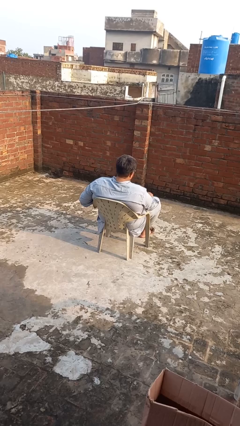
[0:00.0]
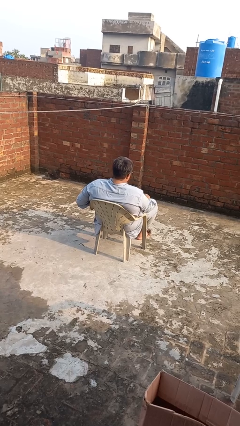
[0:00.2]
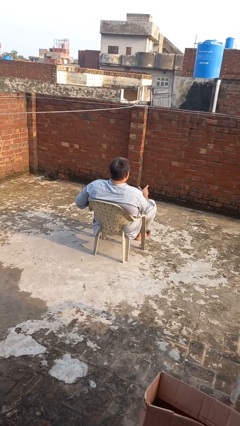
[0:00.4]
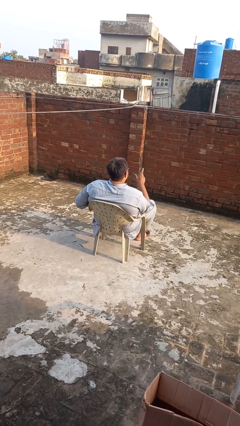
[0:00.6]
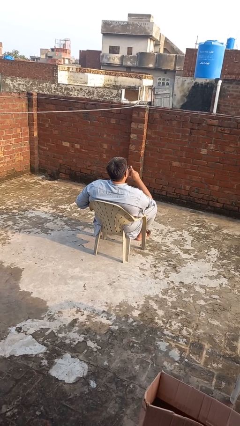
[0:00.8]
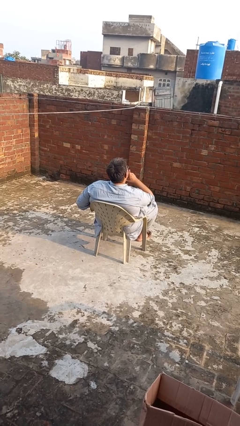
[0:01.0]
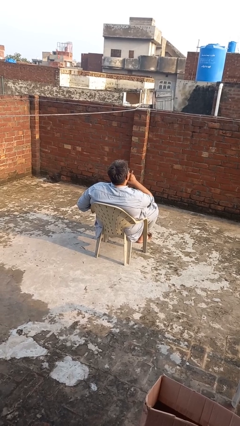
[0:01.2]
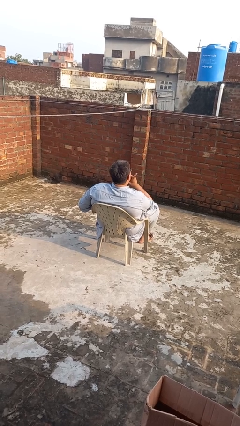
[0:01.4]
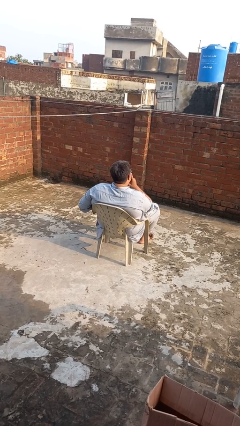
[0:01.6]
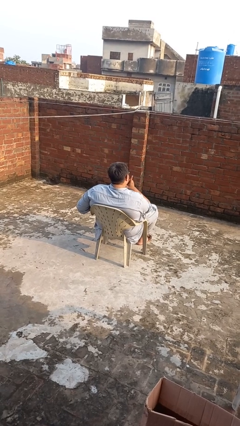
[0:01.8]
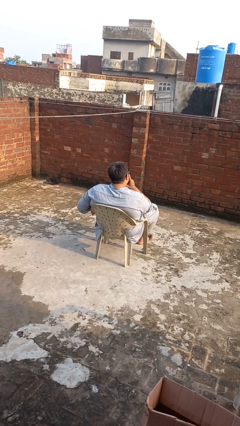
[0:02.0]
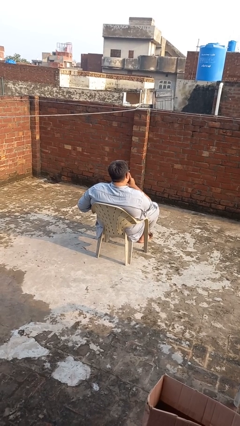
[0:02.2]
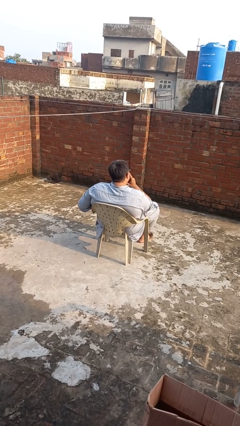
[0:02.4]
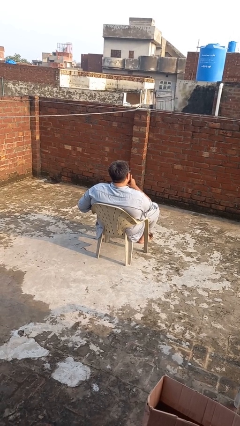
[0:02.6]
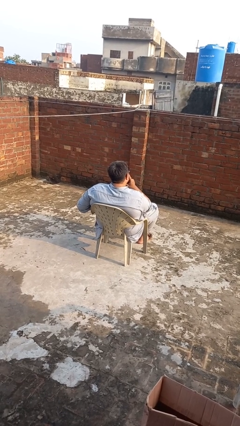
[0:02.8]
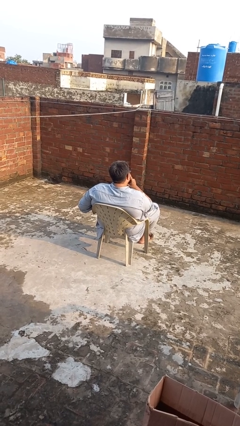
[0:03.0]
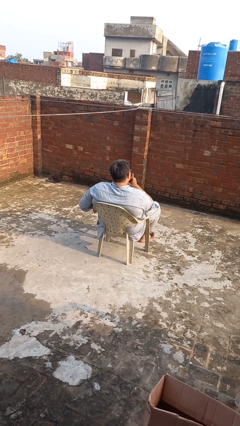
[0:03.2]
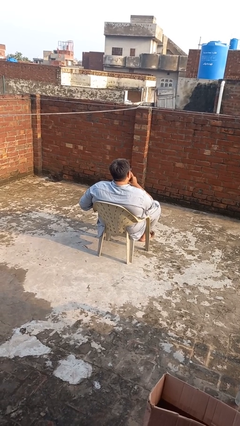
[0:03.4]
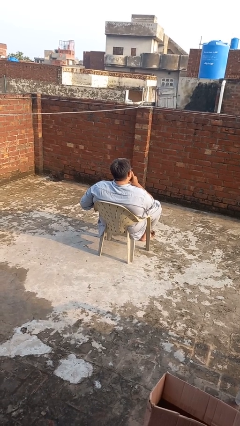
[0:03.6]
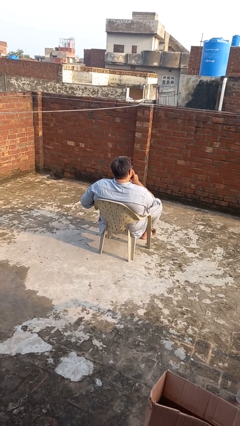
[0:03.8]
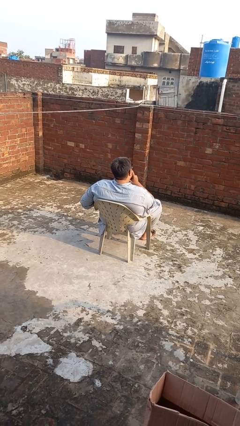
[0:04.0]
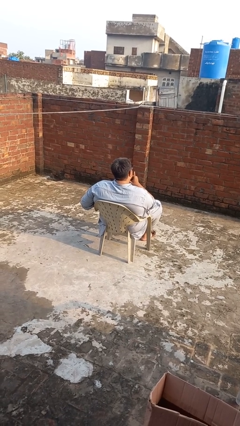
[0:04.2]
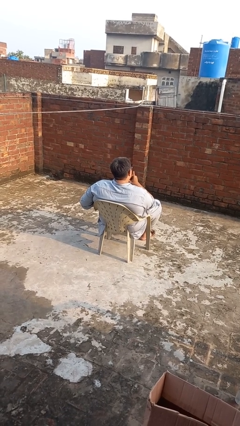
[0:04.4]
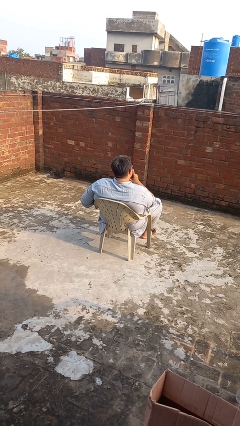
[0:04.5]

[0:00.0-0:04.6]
person strokes chin

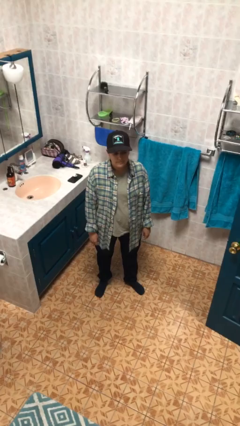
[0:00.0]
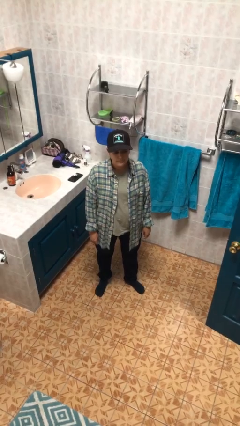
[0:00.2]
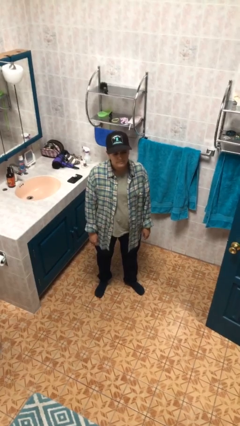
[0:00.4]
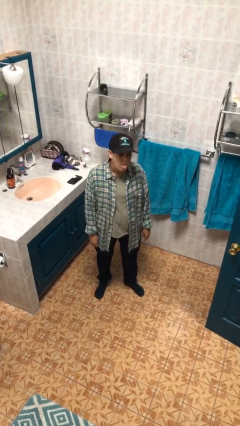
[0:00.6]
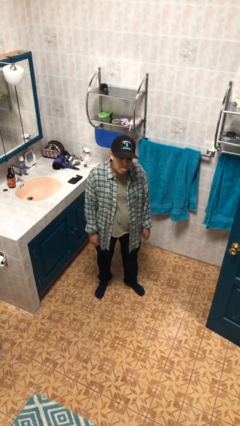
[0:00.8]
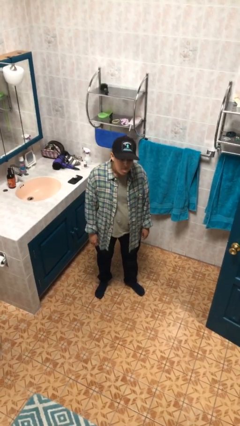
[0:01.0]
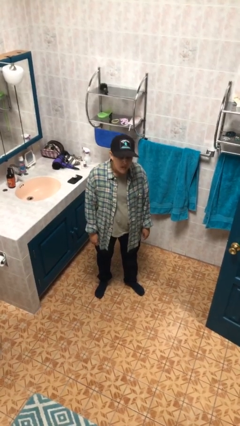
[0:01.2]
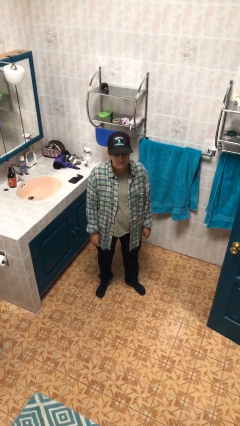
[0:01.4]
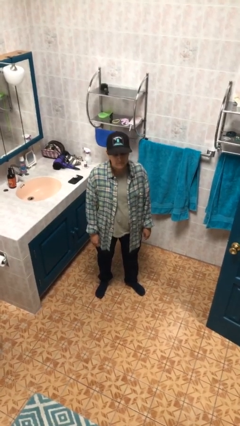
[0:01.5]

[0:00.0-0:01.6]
person sticks out tongue

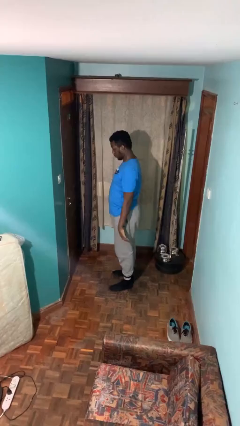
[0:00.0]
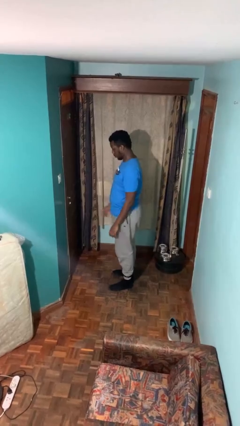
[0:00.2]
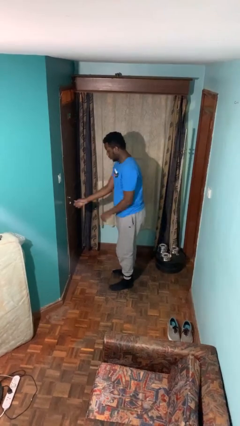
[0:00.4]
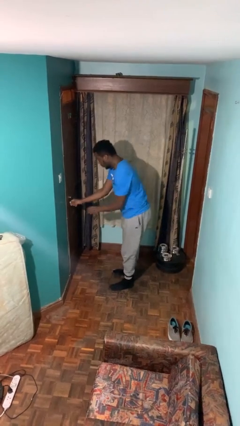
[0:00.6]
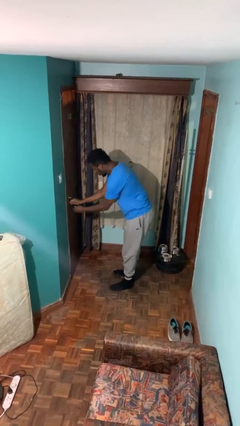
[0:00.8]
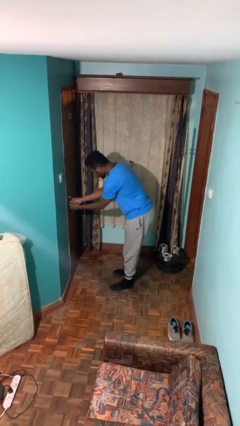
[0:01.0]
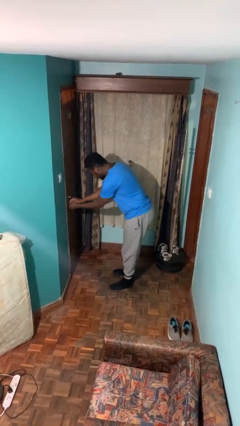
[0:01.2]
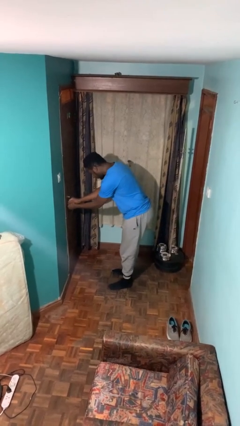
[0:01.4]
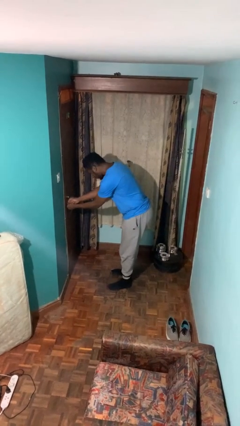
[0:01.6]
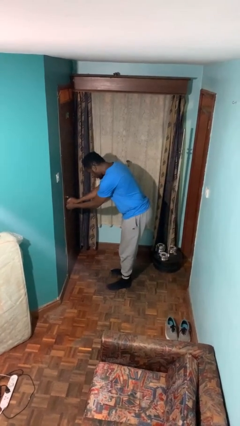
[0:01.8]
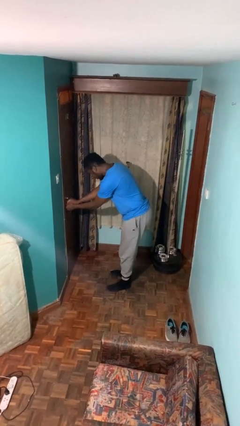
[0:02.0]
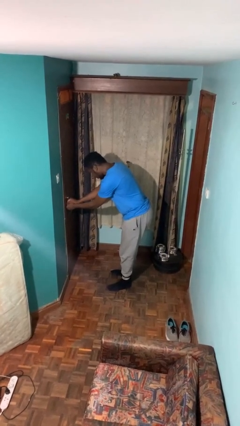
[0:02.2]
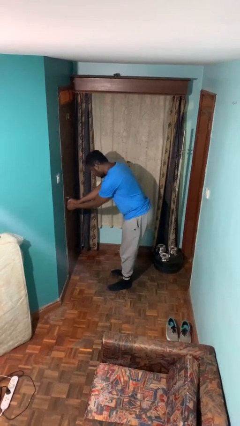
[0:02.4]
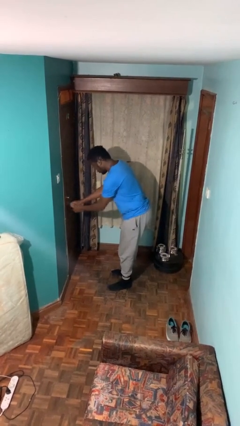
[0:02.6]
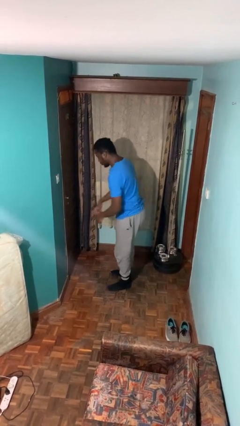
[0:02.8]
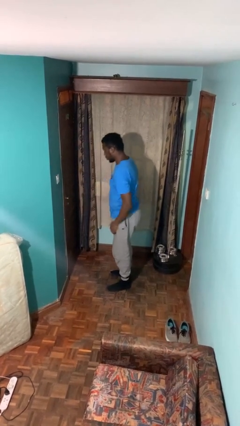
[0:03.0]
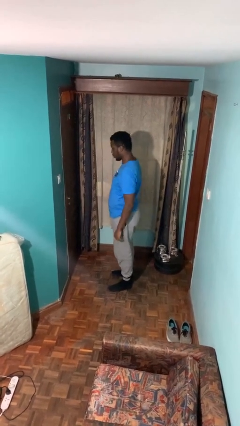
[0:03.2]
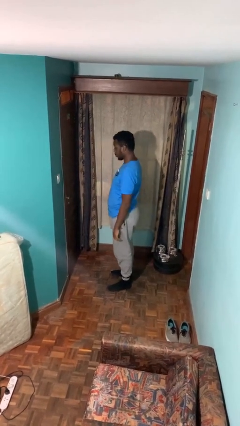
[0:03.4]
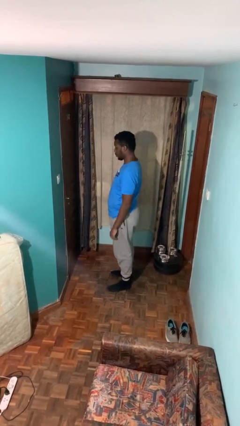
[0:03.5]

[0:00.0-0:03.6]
person locks door with keys

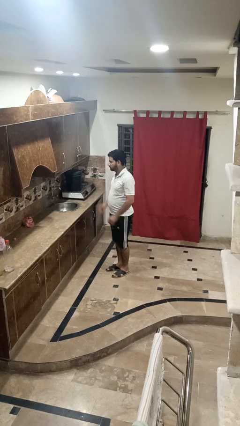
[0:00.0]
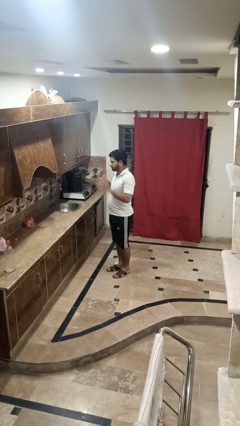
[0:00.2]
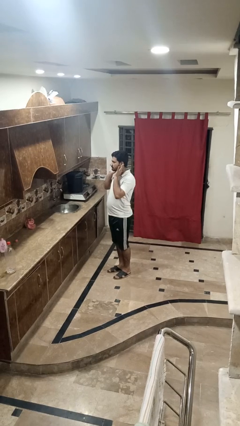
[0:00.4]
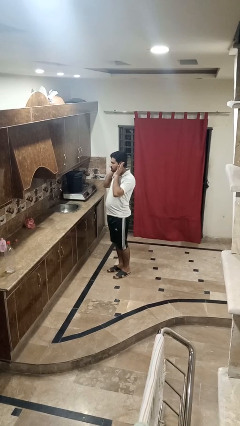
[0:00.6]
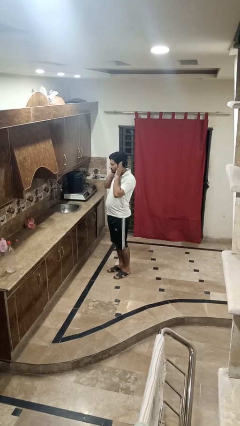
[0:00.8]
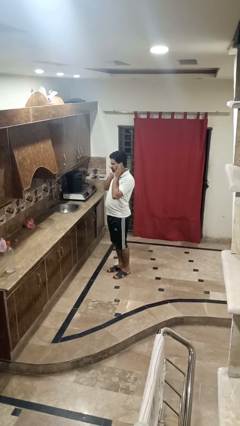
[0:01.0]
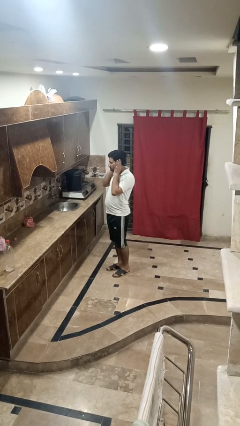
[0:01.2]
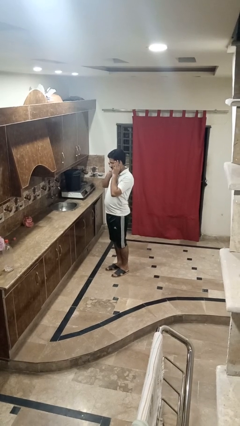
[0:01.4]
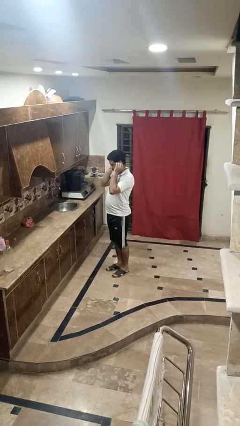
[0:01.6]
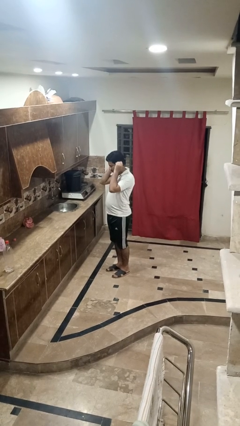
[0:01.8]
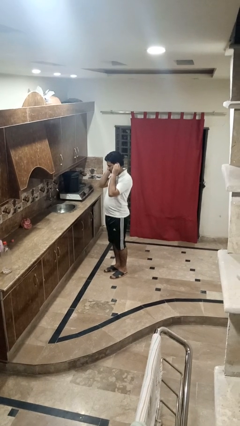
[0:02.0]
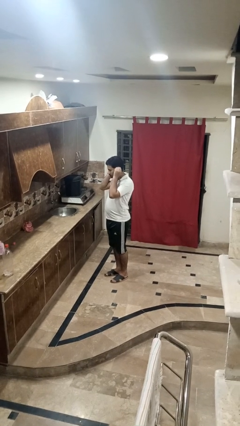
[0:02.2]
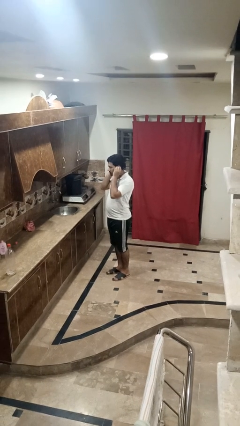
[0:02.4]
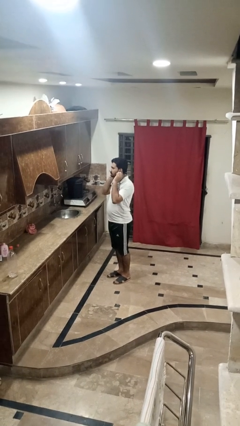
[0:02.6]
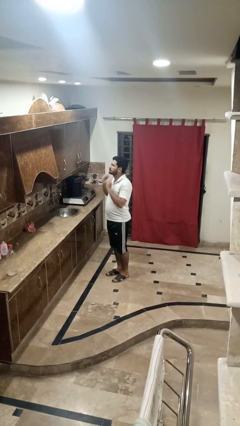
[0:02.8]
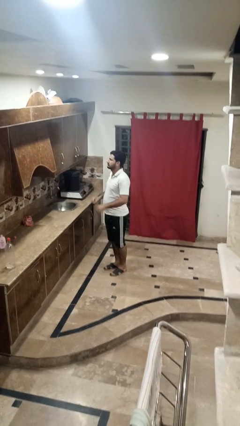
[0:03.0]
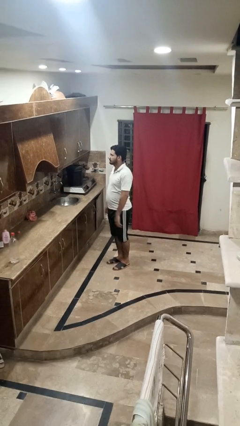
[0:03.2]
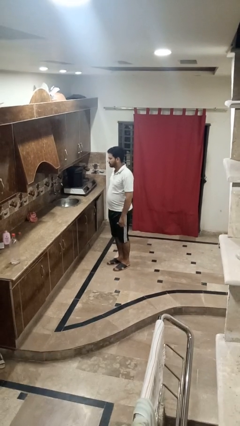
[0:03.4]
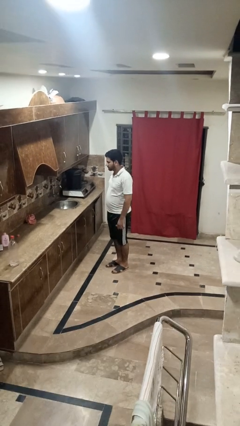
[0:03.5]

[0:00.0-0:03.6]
person touches earlobe

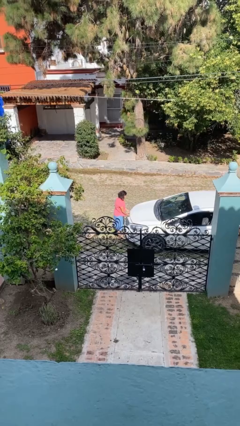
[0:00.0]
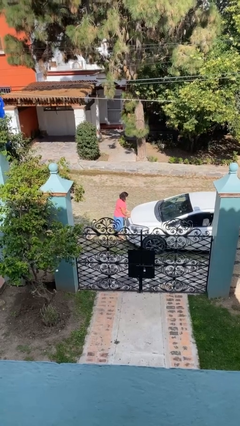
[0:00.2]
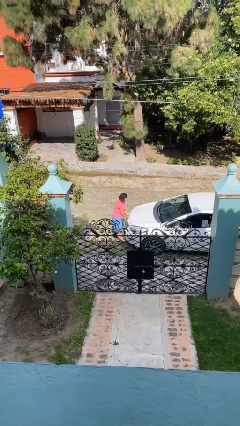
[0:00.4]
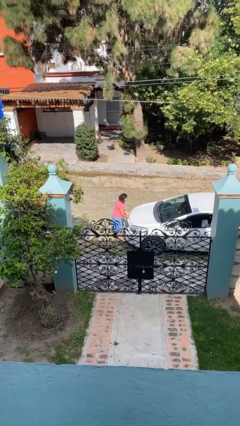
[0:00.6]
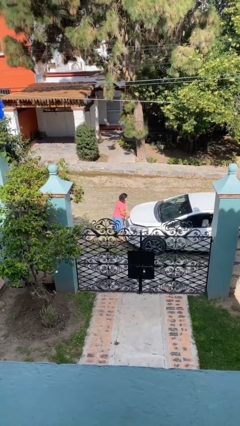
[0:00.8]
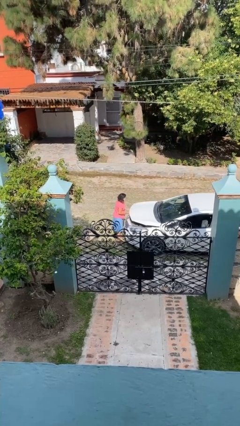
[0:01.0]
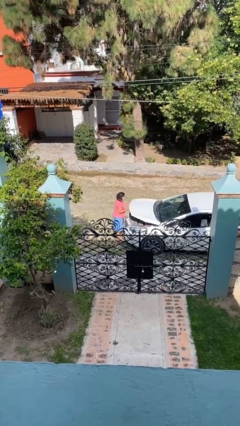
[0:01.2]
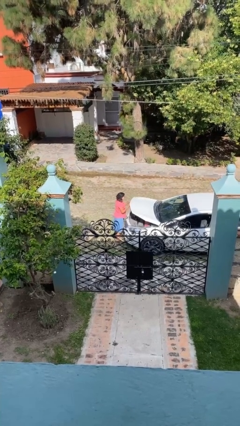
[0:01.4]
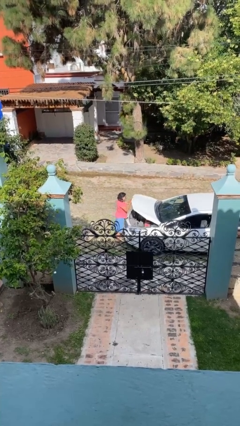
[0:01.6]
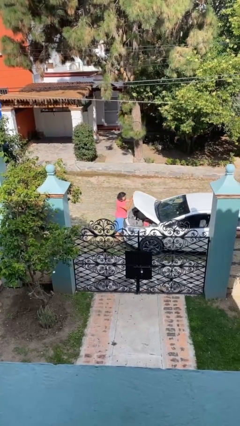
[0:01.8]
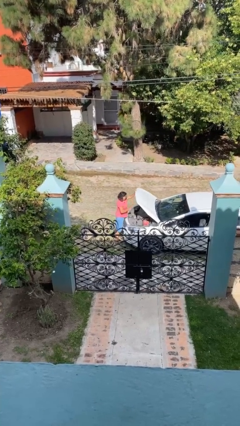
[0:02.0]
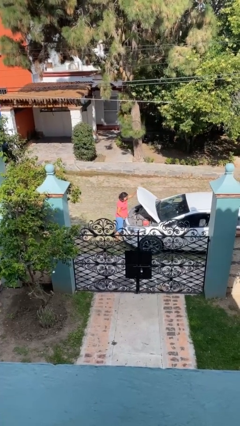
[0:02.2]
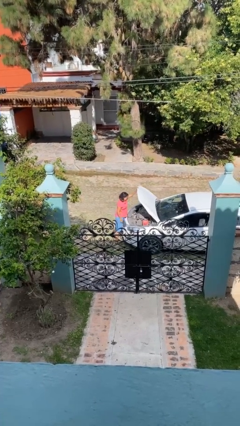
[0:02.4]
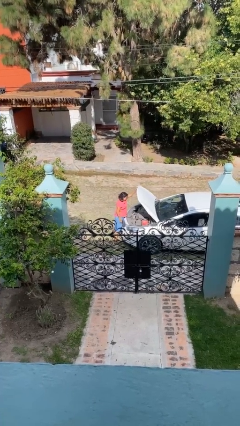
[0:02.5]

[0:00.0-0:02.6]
person opens car hood

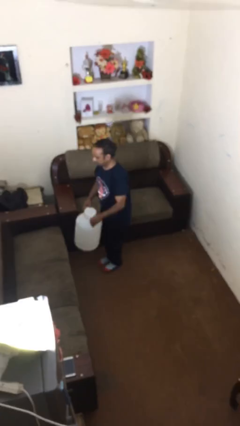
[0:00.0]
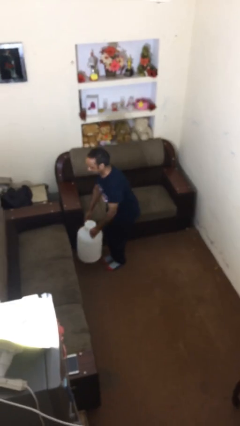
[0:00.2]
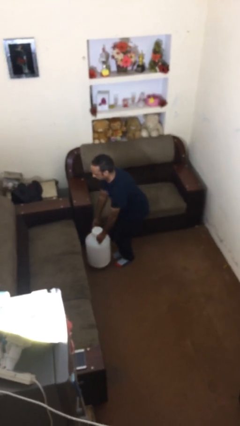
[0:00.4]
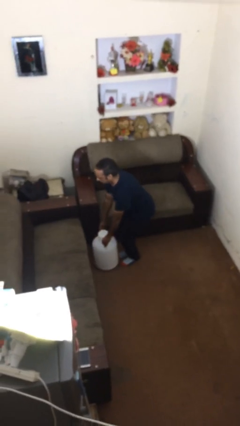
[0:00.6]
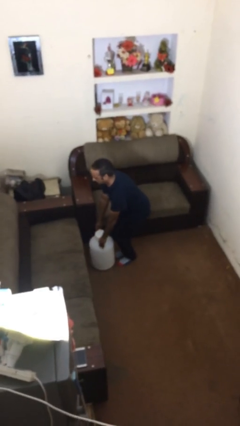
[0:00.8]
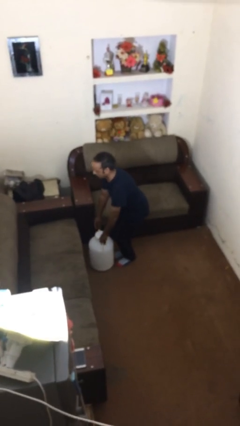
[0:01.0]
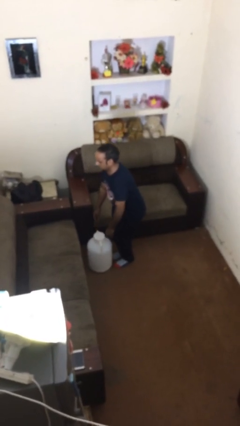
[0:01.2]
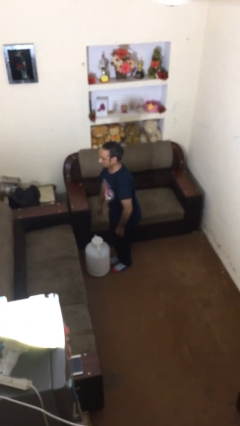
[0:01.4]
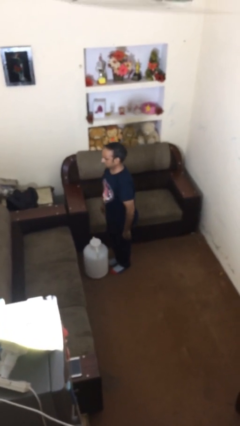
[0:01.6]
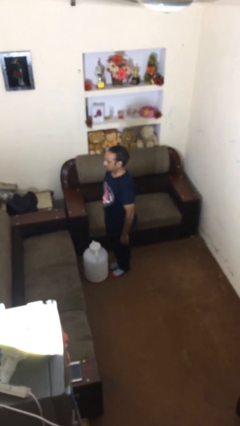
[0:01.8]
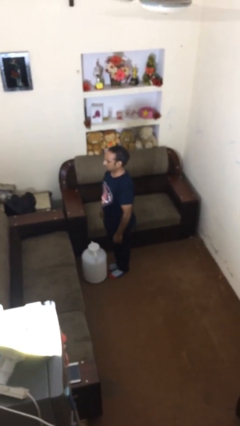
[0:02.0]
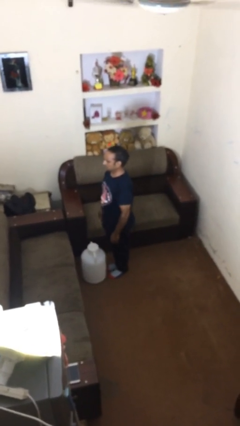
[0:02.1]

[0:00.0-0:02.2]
person puts down object on floor
